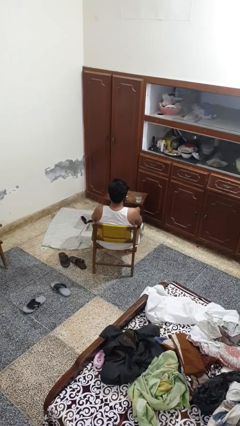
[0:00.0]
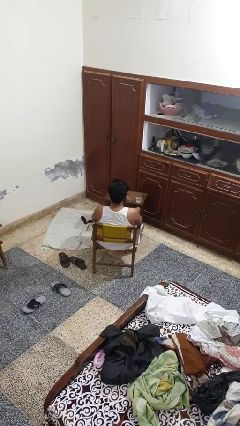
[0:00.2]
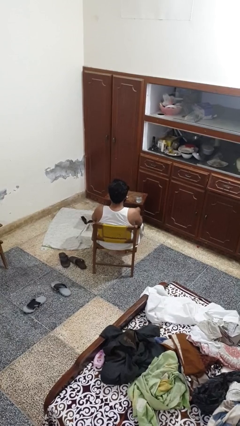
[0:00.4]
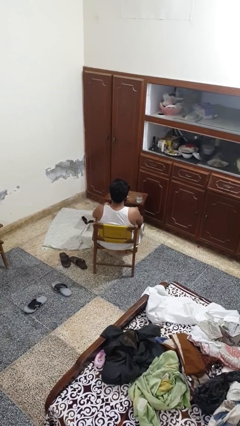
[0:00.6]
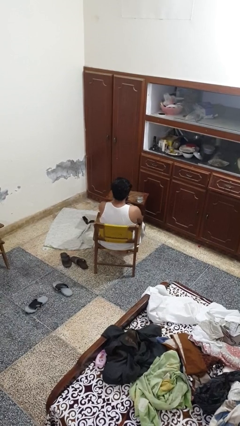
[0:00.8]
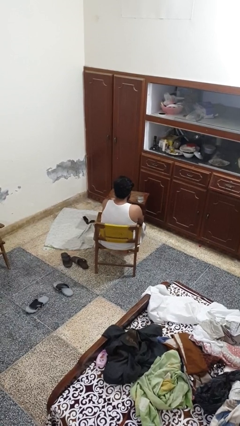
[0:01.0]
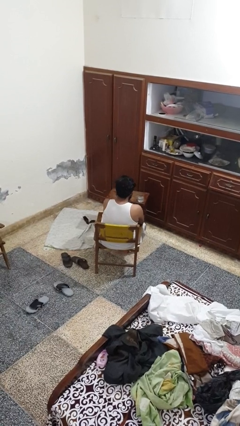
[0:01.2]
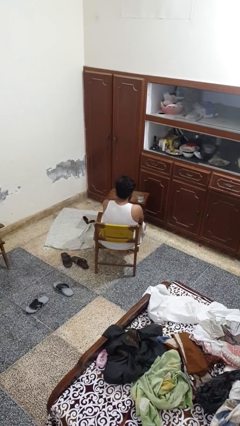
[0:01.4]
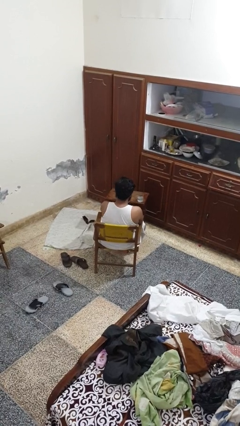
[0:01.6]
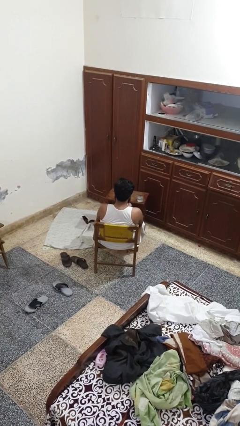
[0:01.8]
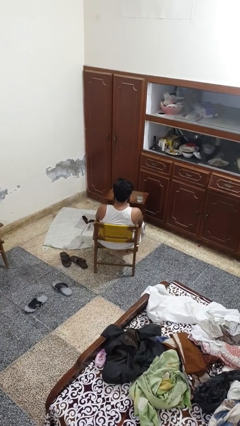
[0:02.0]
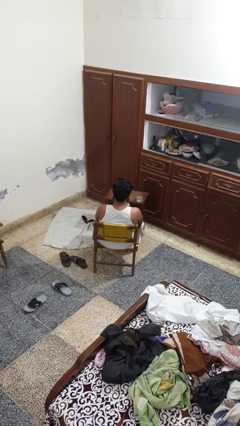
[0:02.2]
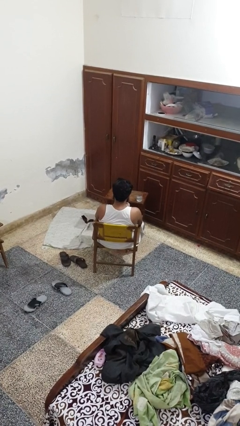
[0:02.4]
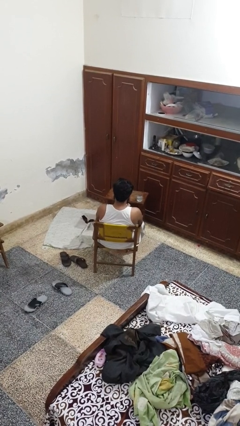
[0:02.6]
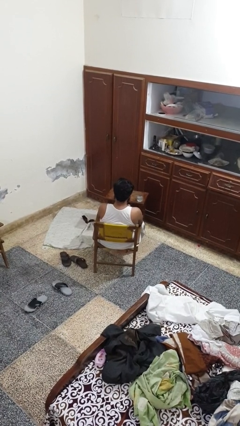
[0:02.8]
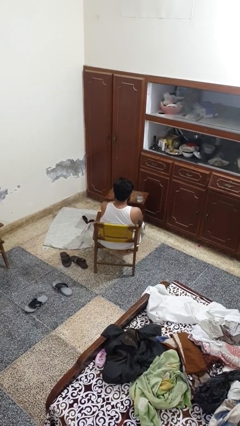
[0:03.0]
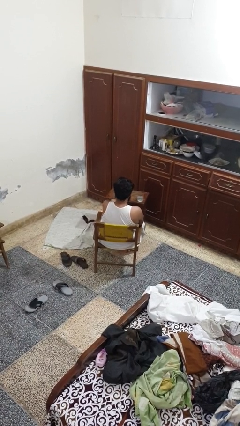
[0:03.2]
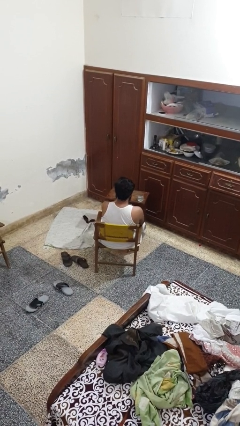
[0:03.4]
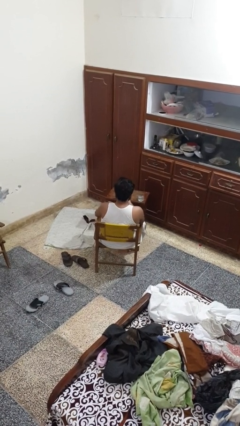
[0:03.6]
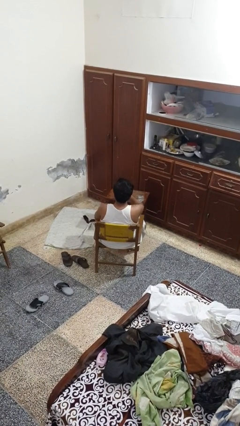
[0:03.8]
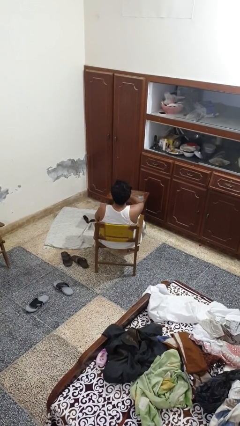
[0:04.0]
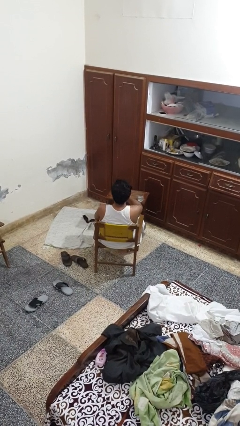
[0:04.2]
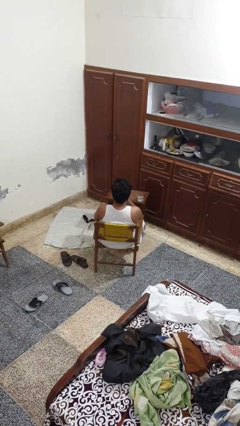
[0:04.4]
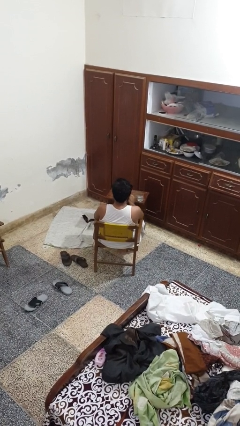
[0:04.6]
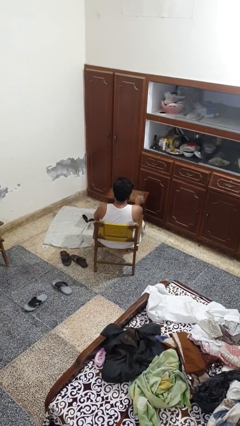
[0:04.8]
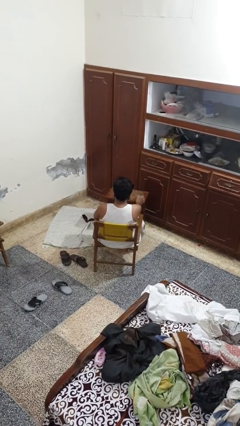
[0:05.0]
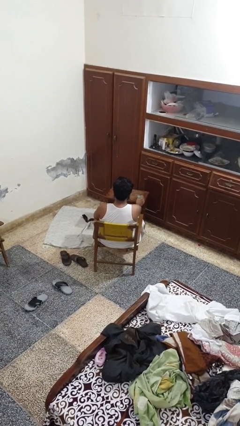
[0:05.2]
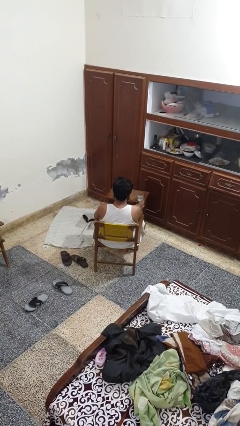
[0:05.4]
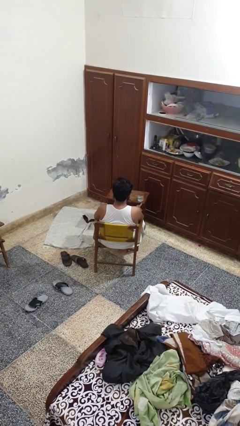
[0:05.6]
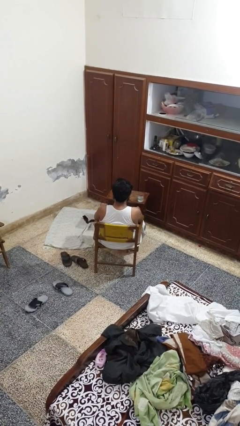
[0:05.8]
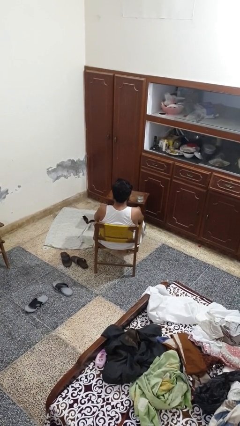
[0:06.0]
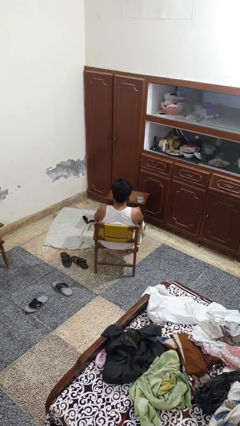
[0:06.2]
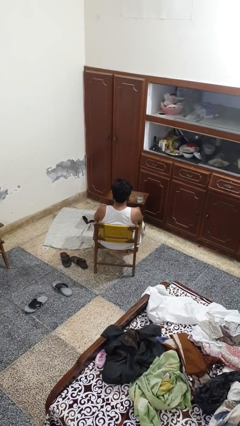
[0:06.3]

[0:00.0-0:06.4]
person takes medicine pills

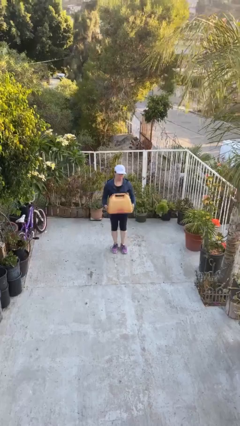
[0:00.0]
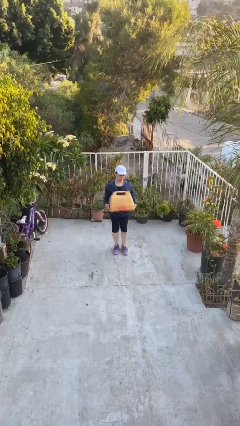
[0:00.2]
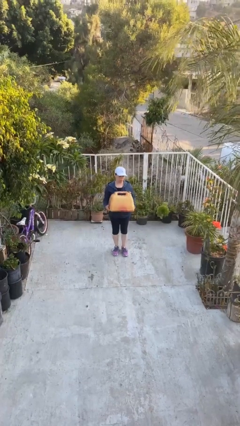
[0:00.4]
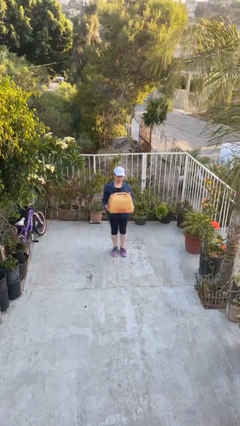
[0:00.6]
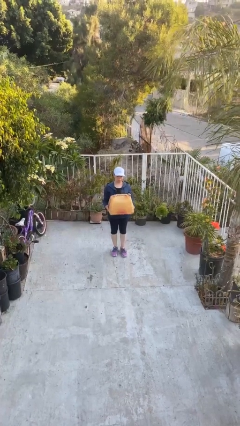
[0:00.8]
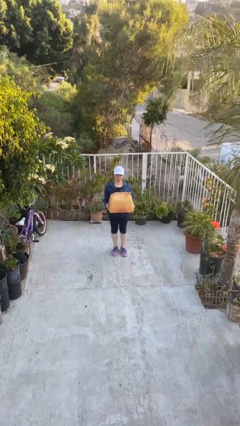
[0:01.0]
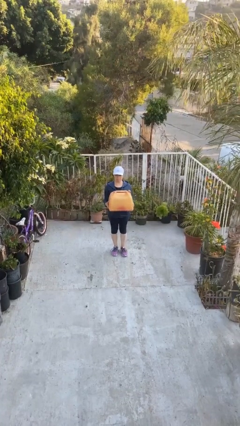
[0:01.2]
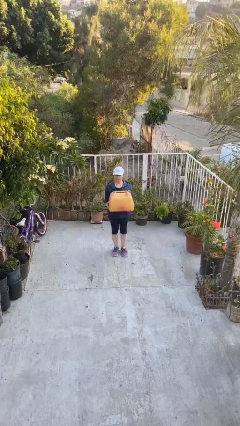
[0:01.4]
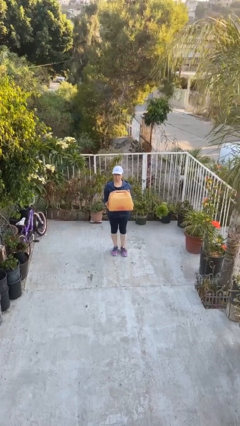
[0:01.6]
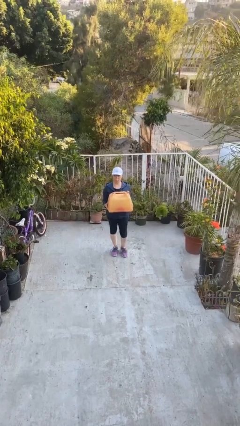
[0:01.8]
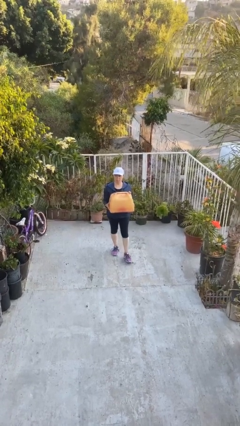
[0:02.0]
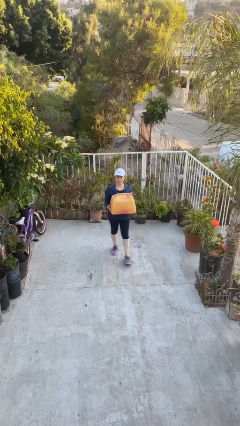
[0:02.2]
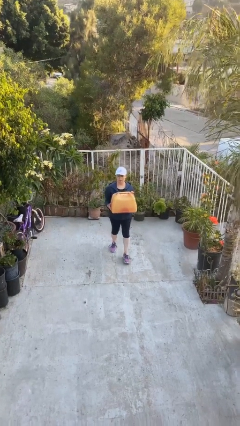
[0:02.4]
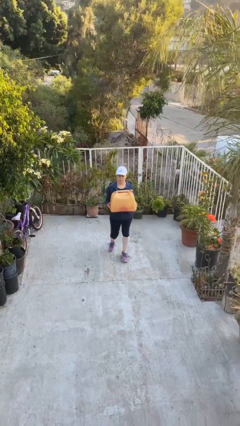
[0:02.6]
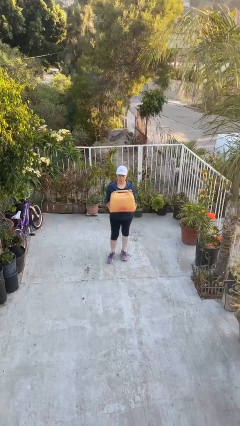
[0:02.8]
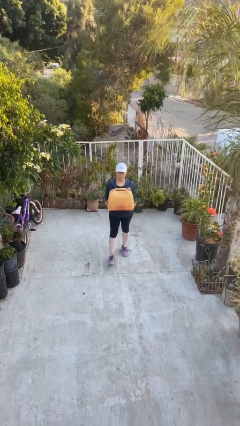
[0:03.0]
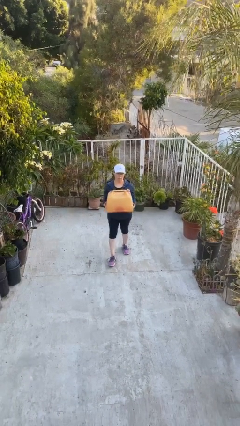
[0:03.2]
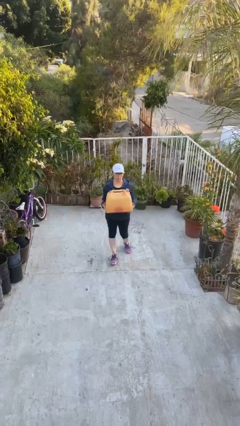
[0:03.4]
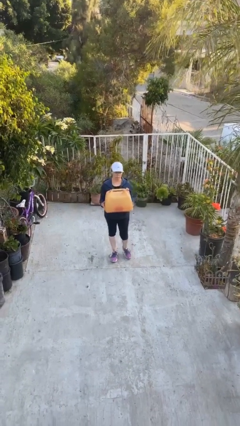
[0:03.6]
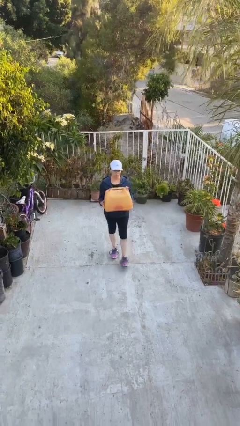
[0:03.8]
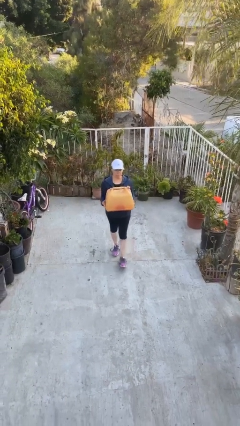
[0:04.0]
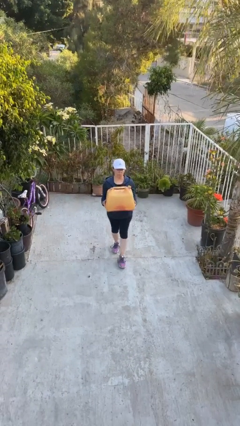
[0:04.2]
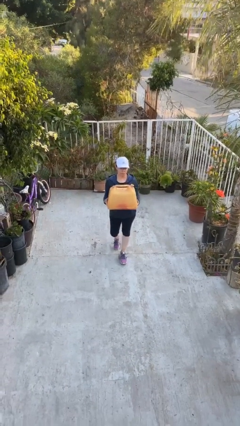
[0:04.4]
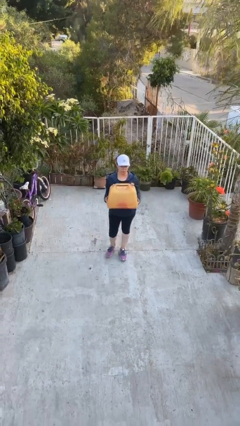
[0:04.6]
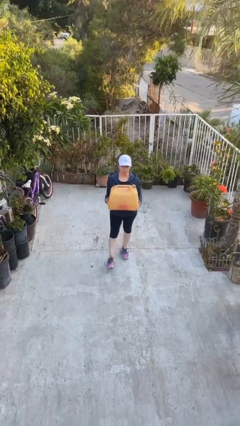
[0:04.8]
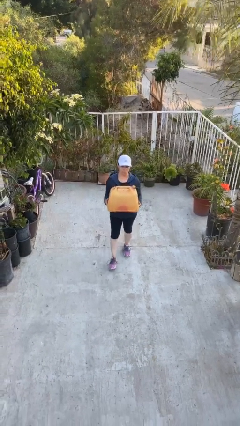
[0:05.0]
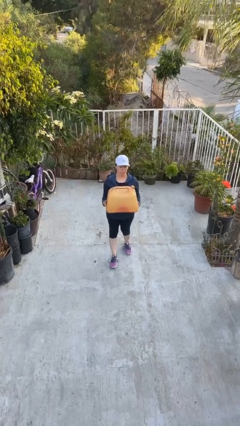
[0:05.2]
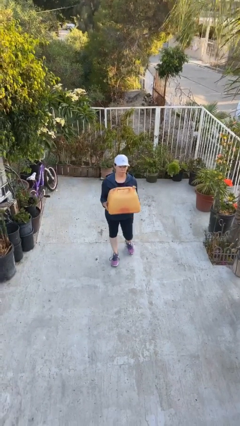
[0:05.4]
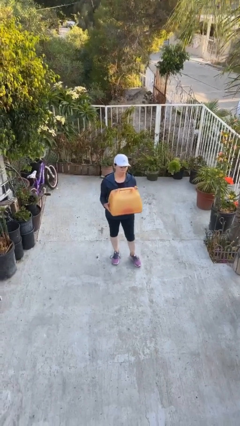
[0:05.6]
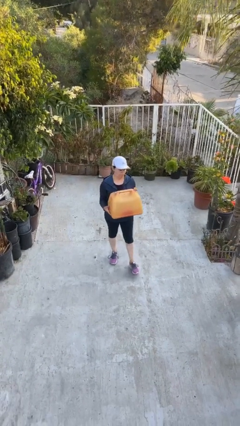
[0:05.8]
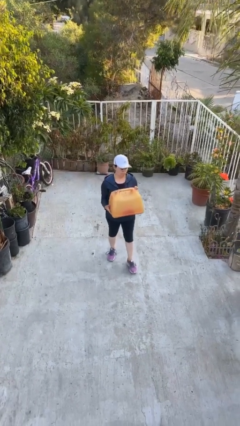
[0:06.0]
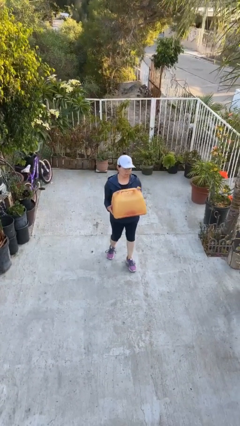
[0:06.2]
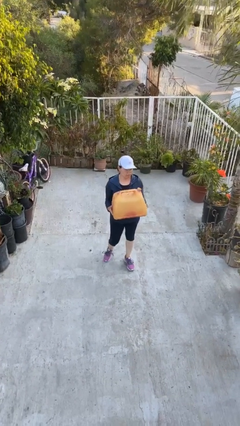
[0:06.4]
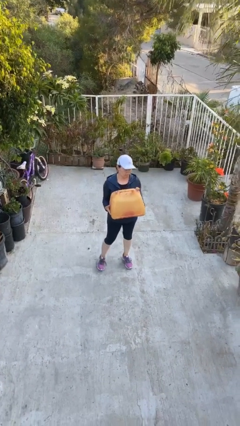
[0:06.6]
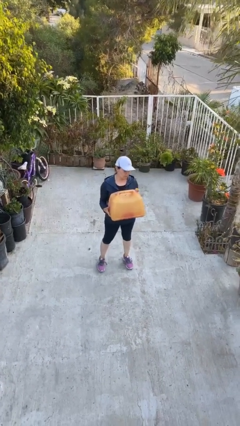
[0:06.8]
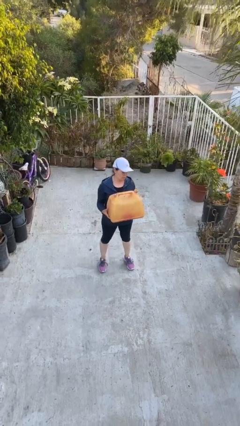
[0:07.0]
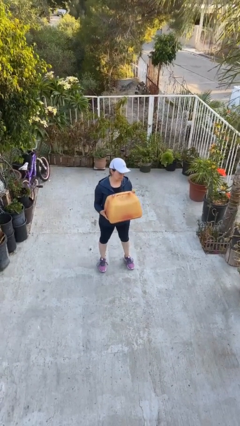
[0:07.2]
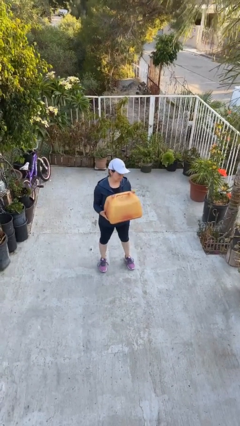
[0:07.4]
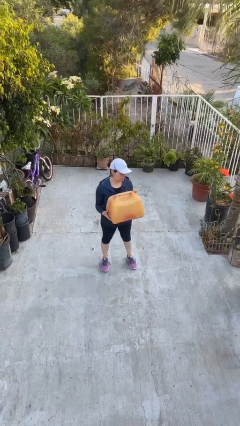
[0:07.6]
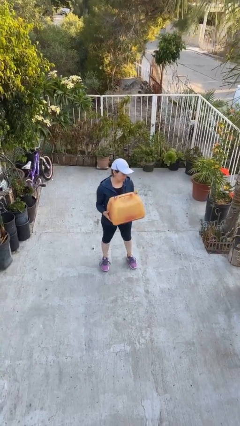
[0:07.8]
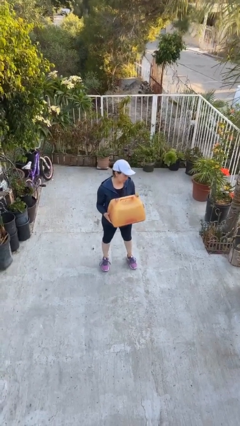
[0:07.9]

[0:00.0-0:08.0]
person carries heavy object

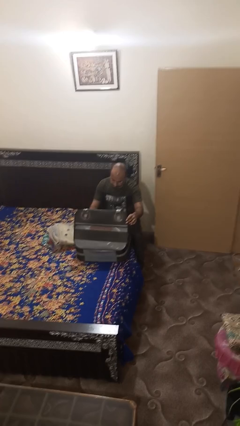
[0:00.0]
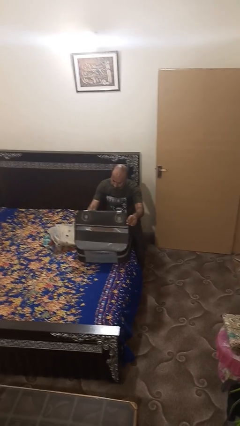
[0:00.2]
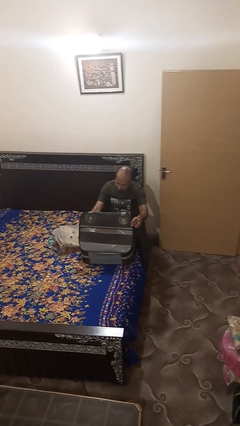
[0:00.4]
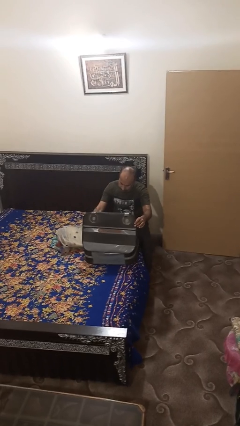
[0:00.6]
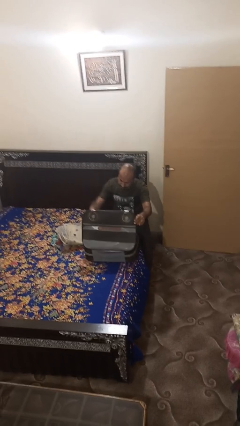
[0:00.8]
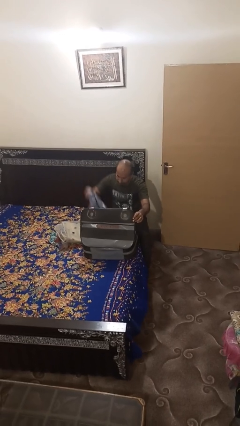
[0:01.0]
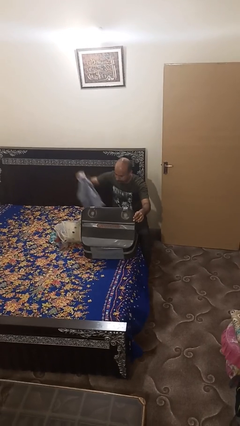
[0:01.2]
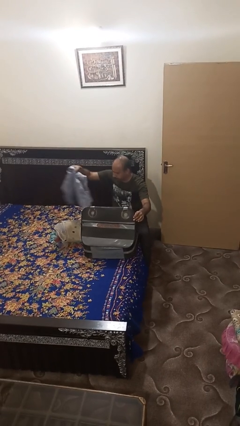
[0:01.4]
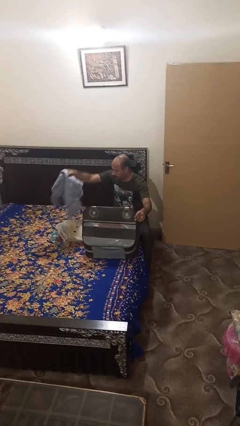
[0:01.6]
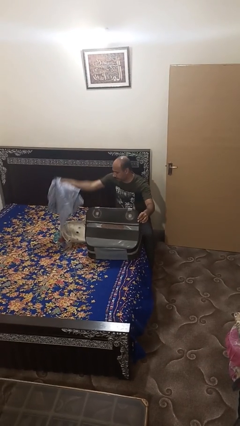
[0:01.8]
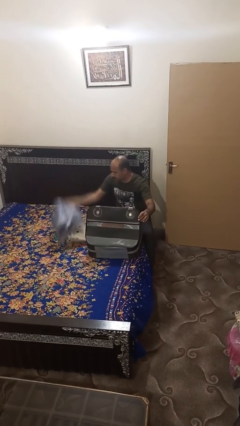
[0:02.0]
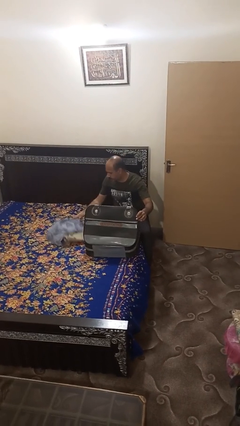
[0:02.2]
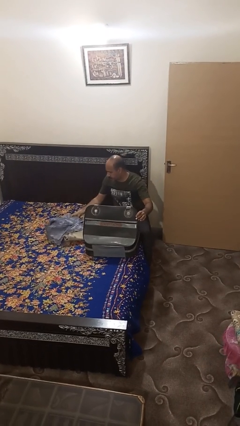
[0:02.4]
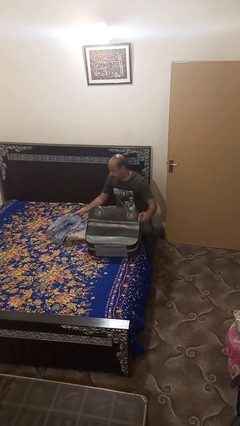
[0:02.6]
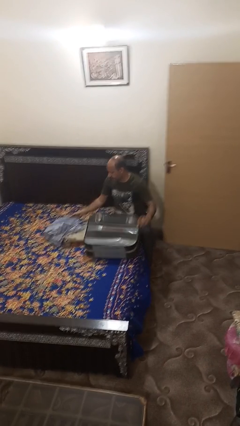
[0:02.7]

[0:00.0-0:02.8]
person unloads clothes from suitcase

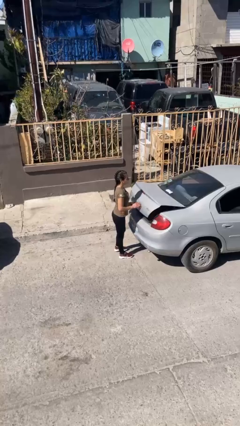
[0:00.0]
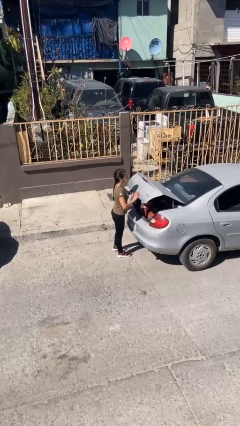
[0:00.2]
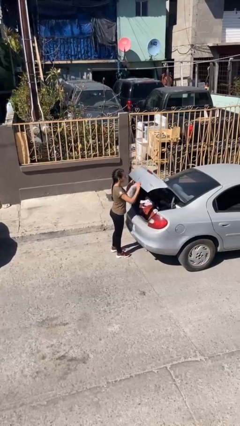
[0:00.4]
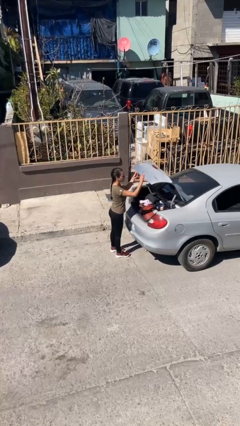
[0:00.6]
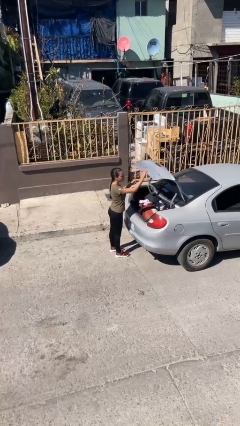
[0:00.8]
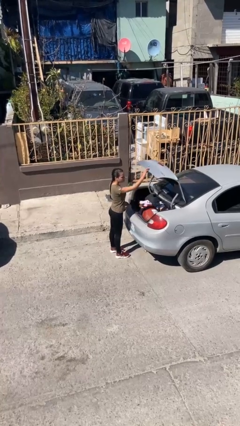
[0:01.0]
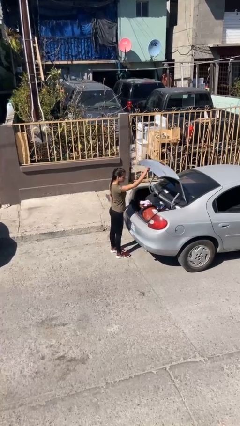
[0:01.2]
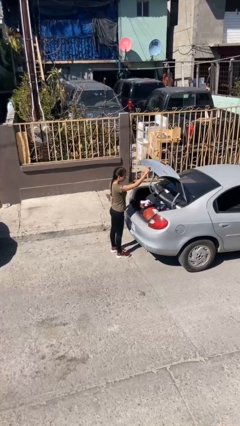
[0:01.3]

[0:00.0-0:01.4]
person opens car trunk
